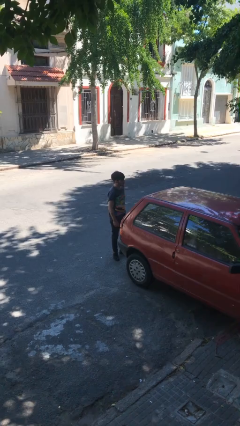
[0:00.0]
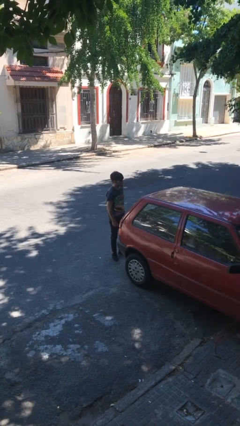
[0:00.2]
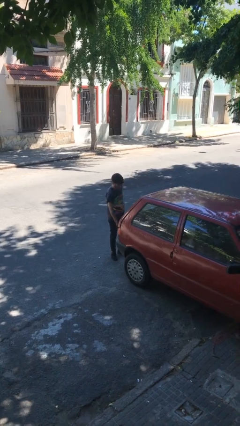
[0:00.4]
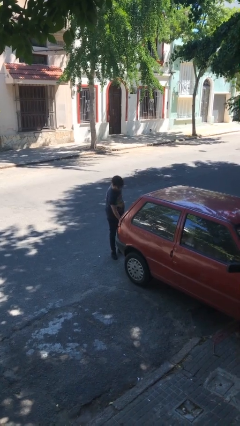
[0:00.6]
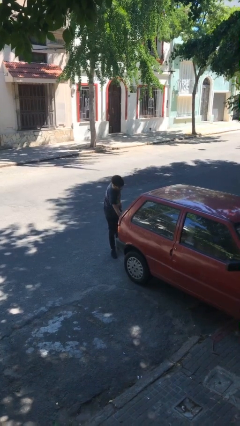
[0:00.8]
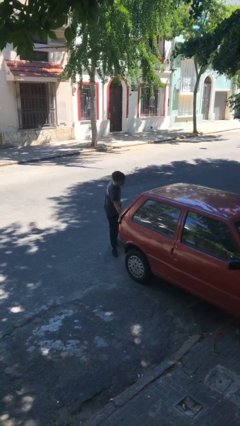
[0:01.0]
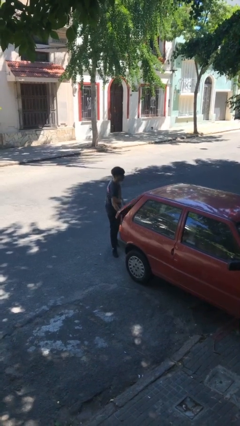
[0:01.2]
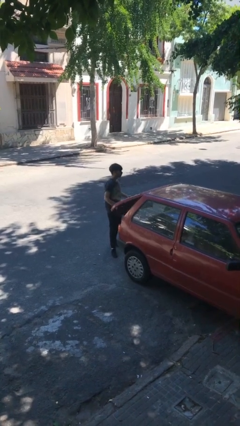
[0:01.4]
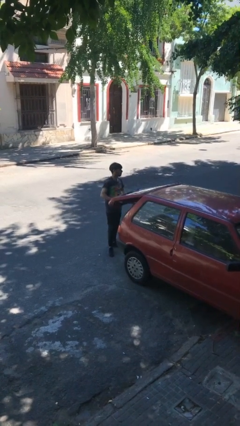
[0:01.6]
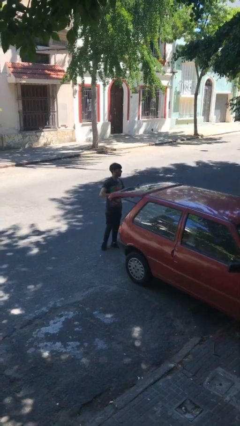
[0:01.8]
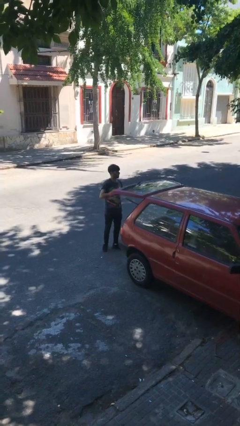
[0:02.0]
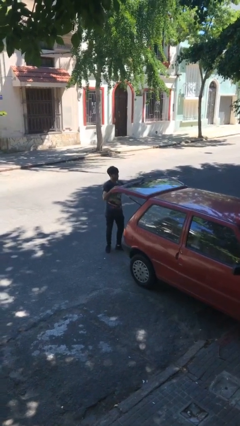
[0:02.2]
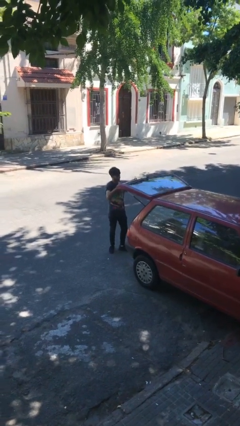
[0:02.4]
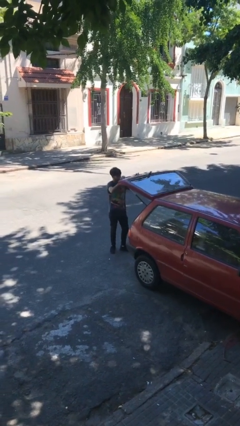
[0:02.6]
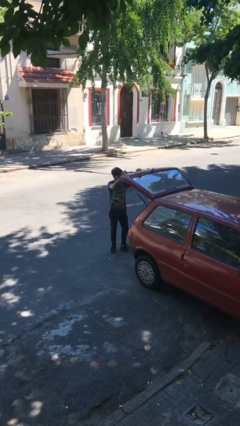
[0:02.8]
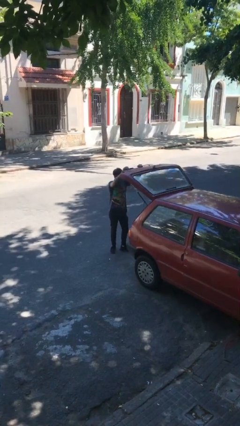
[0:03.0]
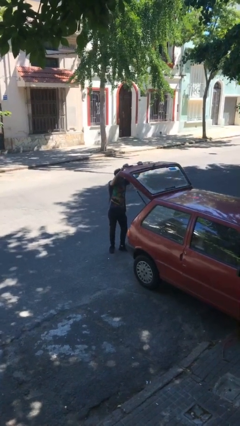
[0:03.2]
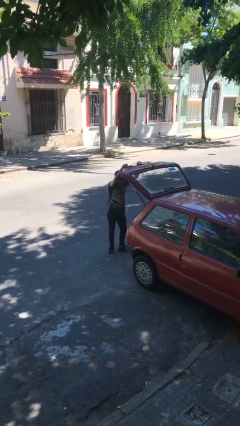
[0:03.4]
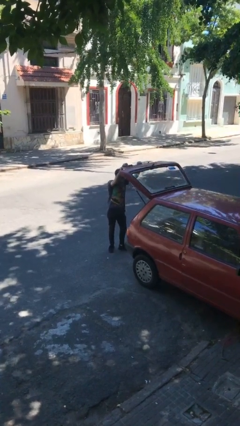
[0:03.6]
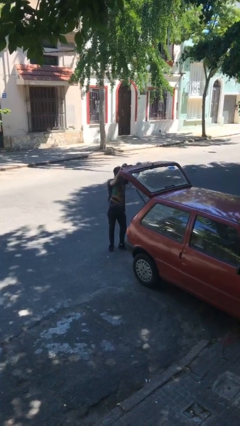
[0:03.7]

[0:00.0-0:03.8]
person opens car trunk

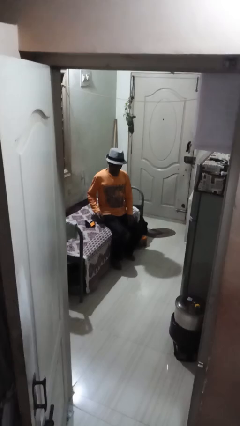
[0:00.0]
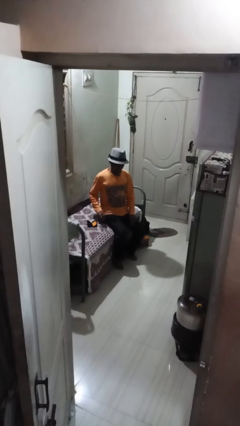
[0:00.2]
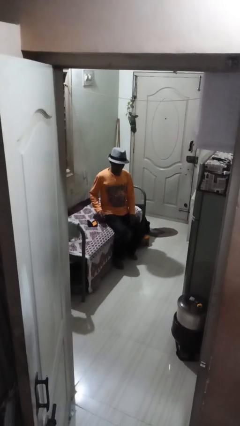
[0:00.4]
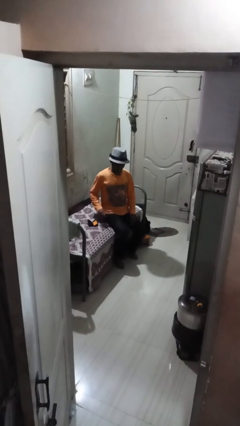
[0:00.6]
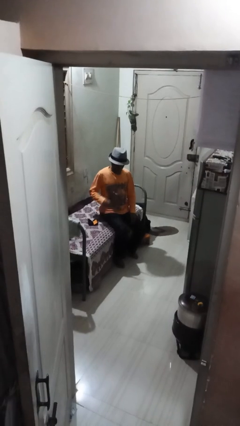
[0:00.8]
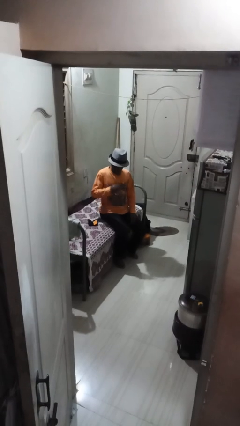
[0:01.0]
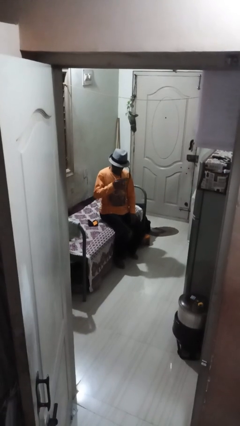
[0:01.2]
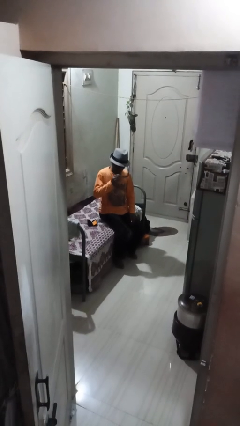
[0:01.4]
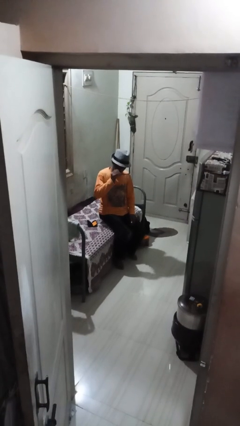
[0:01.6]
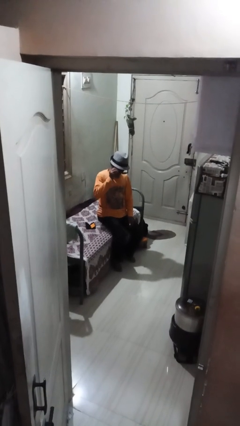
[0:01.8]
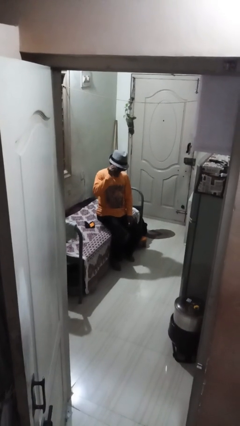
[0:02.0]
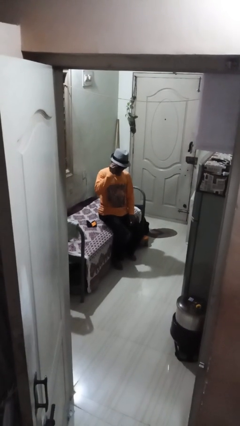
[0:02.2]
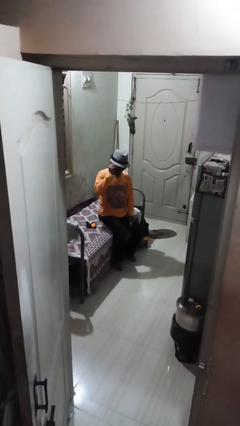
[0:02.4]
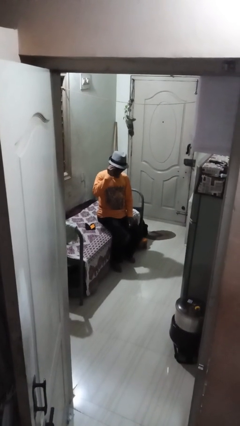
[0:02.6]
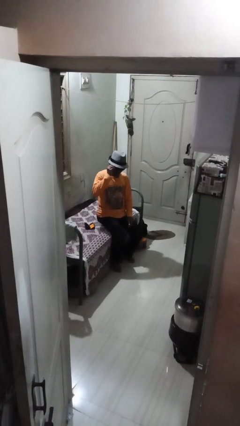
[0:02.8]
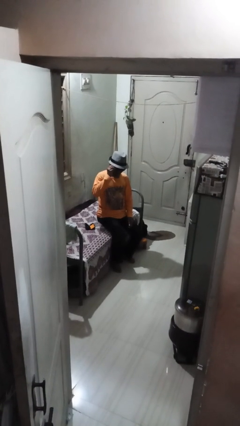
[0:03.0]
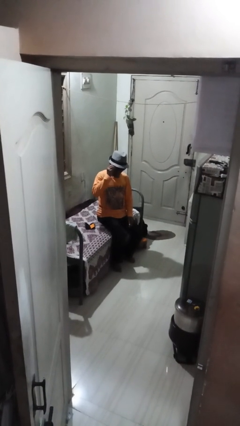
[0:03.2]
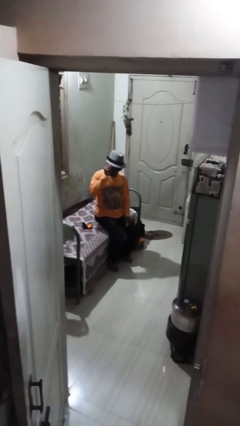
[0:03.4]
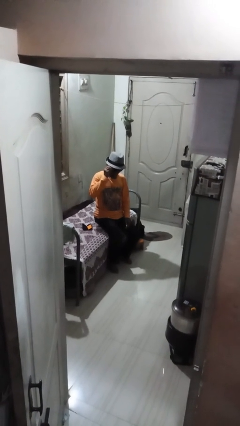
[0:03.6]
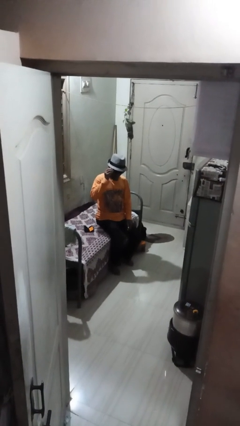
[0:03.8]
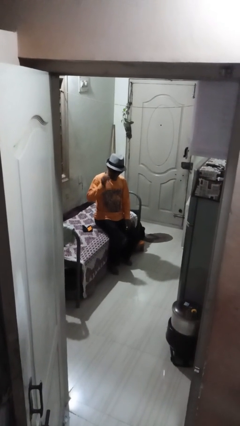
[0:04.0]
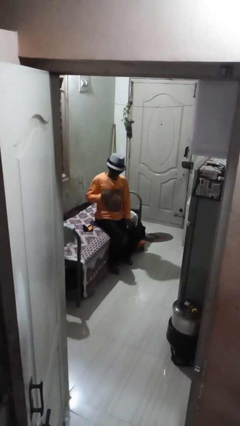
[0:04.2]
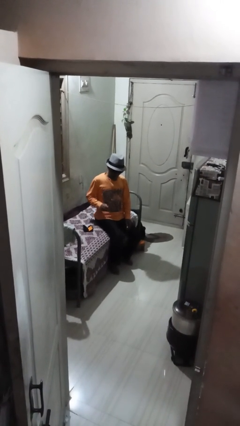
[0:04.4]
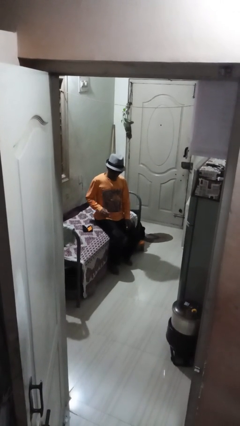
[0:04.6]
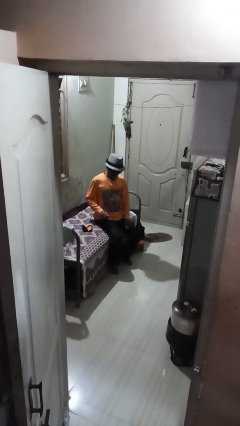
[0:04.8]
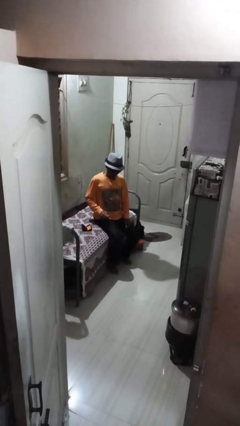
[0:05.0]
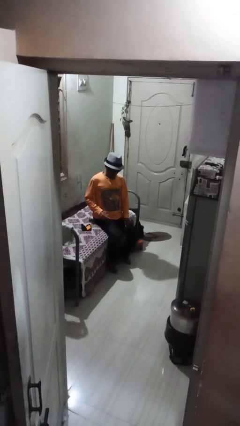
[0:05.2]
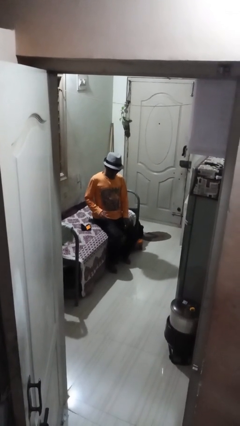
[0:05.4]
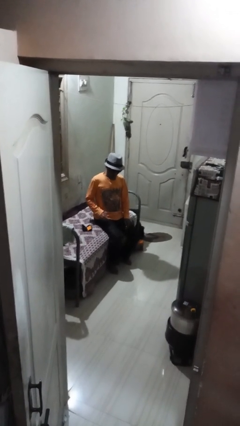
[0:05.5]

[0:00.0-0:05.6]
person puts on sunglasses

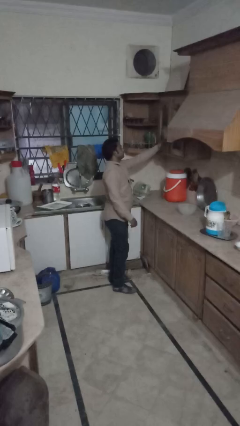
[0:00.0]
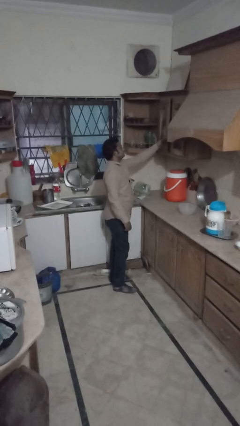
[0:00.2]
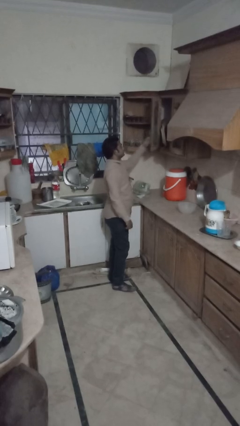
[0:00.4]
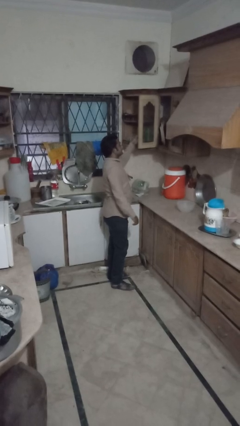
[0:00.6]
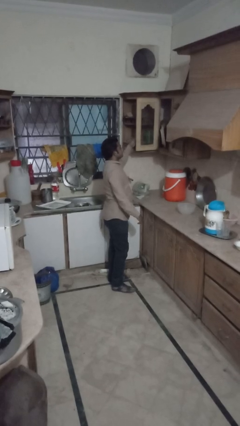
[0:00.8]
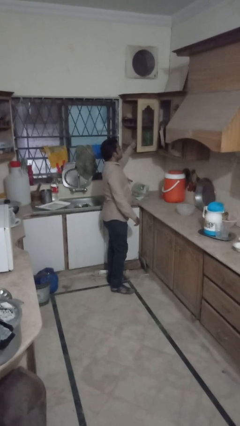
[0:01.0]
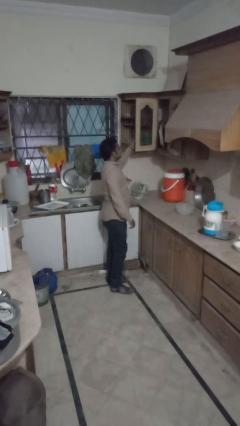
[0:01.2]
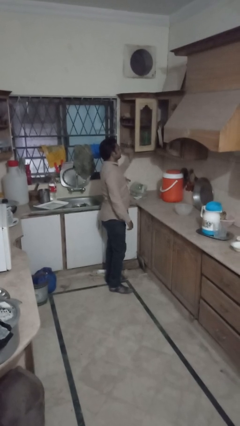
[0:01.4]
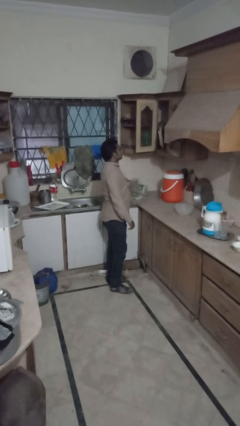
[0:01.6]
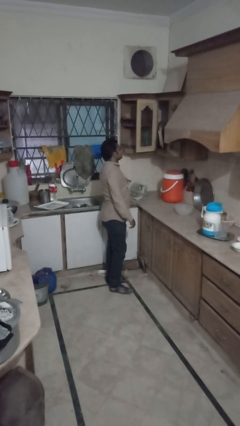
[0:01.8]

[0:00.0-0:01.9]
person opens cabinet

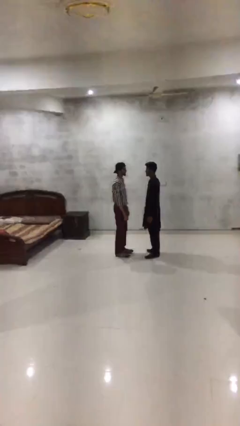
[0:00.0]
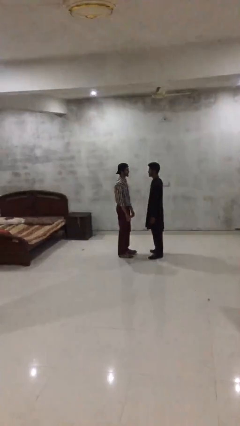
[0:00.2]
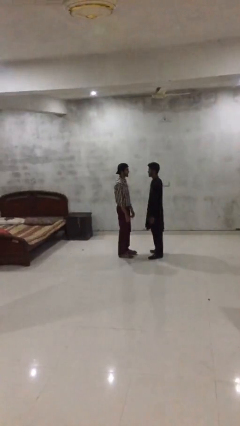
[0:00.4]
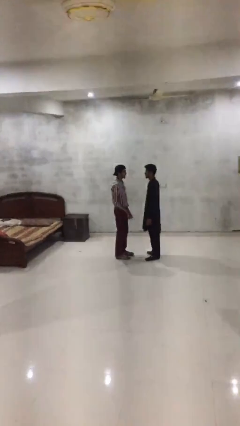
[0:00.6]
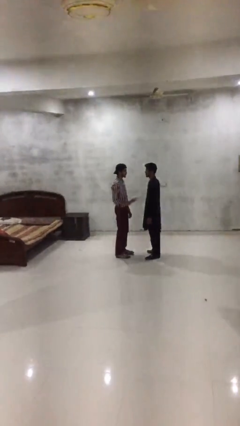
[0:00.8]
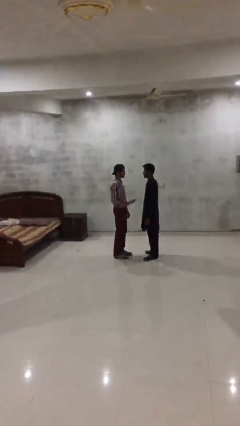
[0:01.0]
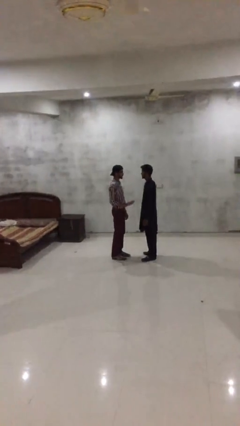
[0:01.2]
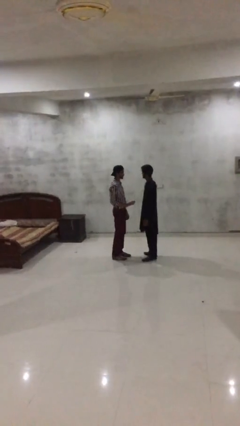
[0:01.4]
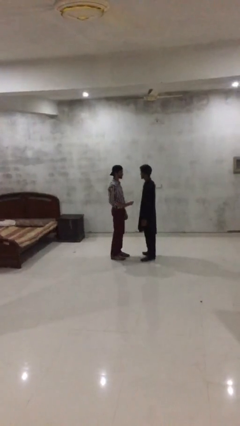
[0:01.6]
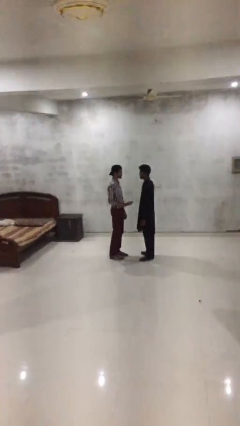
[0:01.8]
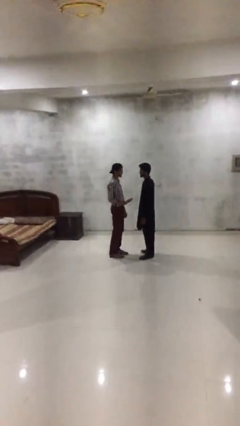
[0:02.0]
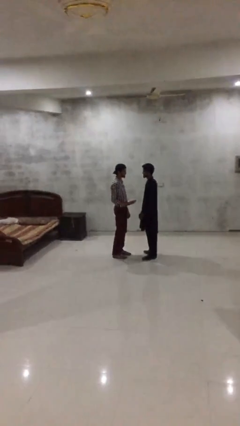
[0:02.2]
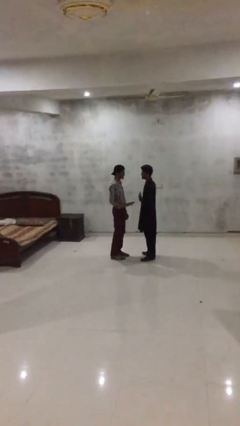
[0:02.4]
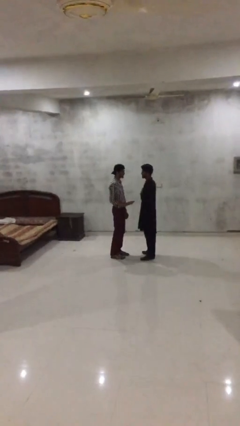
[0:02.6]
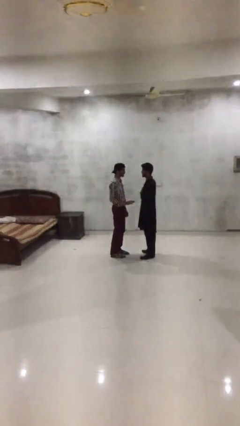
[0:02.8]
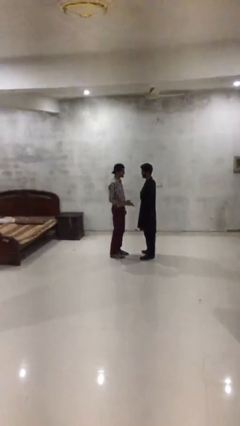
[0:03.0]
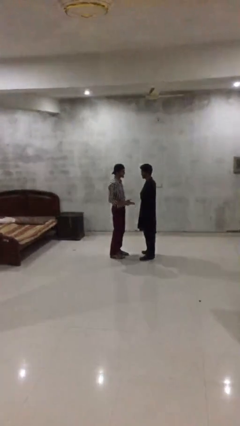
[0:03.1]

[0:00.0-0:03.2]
person talks to person

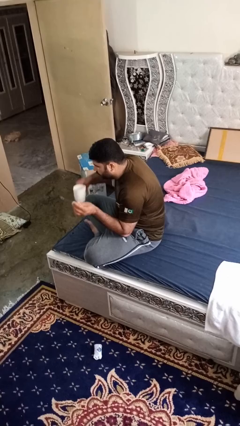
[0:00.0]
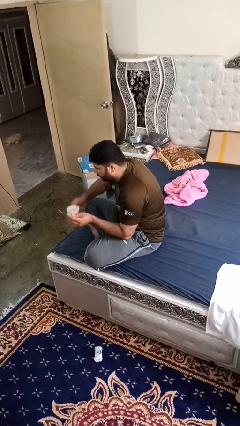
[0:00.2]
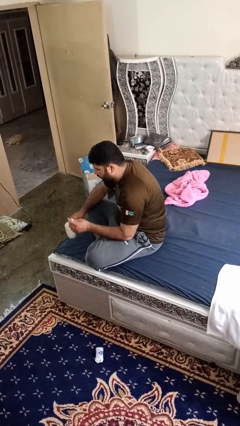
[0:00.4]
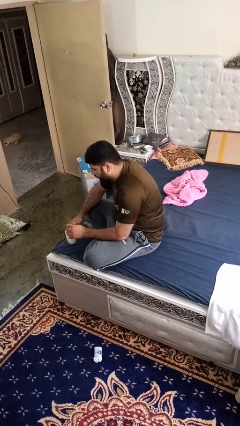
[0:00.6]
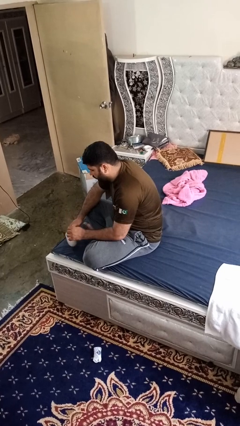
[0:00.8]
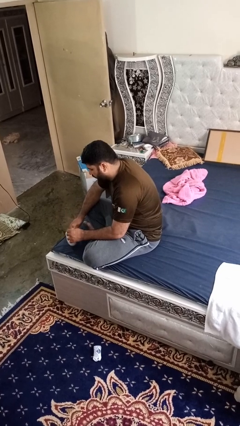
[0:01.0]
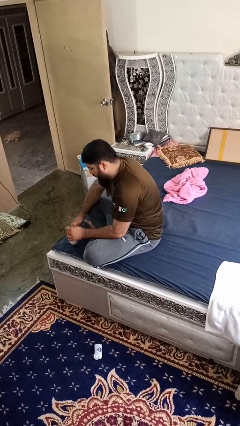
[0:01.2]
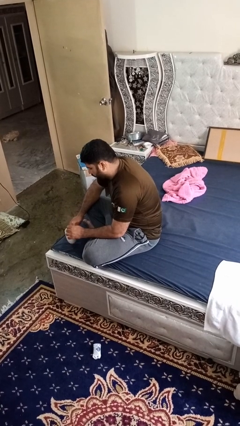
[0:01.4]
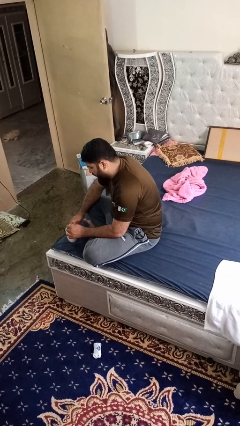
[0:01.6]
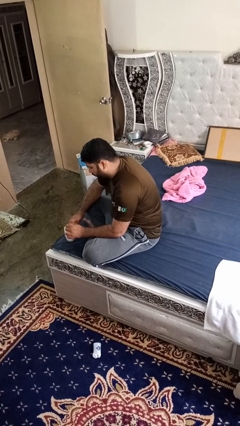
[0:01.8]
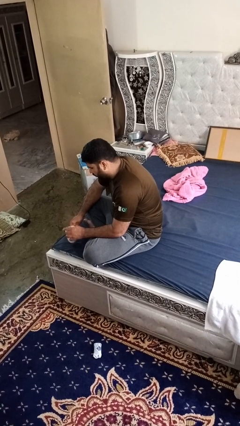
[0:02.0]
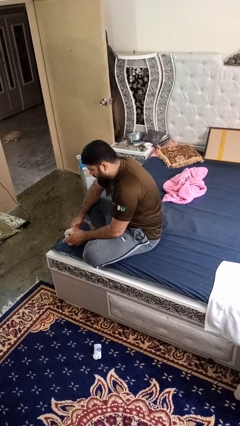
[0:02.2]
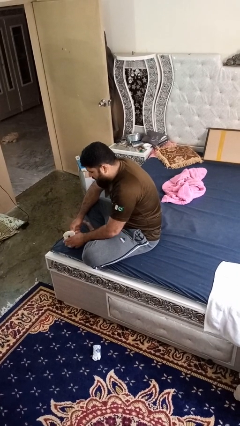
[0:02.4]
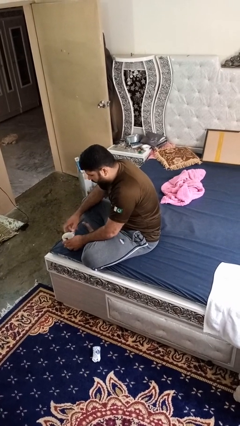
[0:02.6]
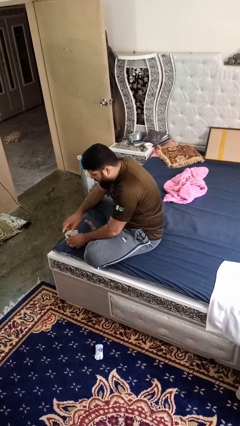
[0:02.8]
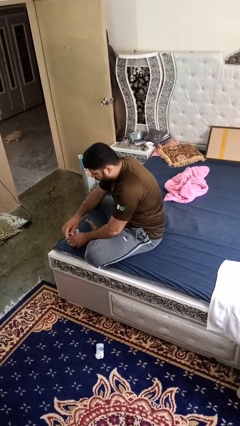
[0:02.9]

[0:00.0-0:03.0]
person stirs mug
